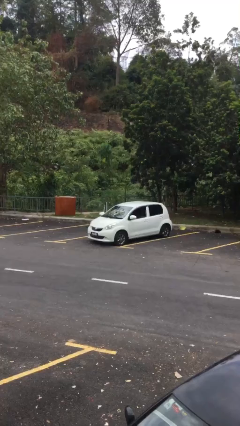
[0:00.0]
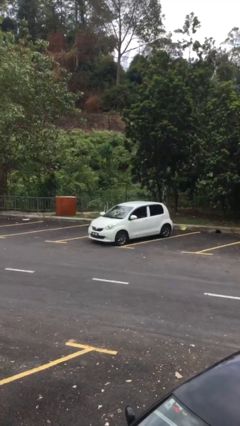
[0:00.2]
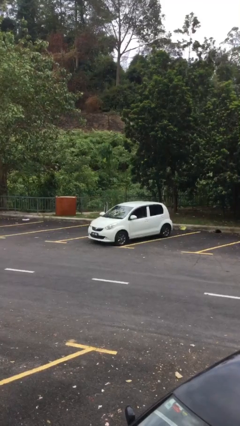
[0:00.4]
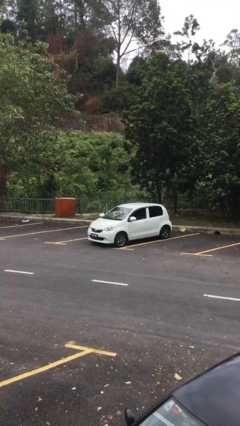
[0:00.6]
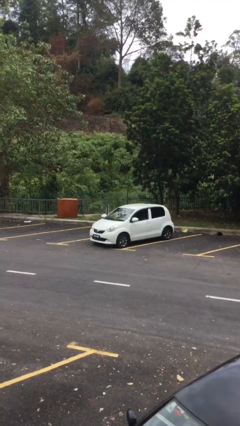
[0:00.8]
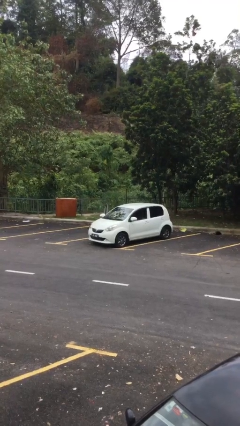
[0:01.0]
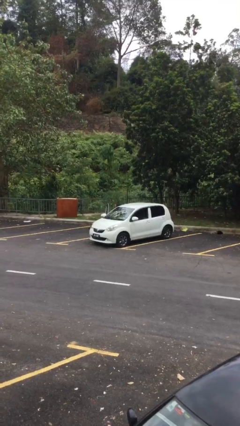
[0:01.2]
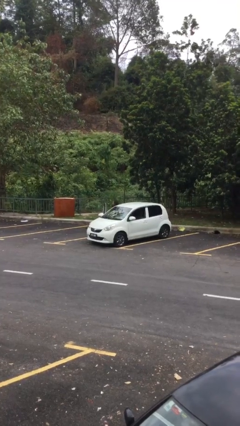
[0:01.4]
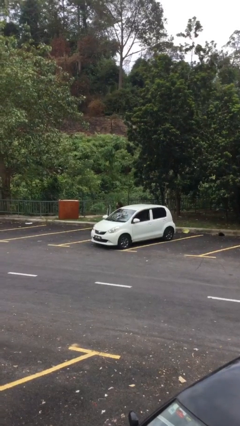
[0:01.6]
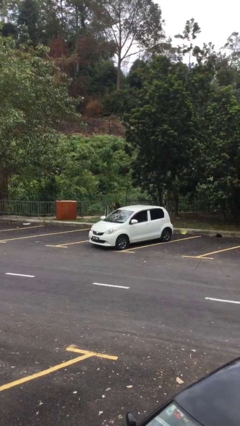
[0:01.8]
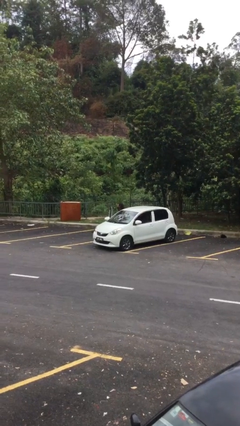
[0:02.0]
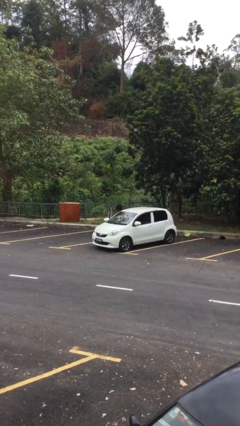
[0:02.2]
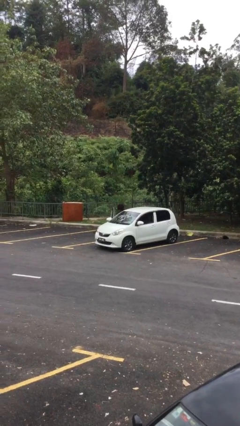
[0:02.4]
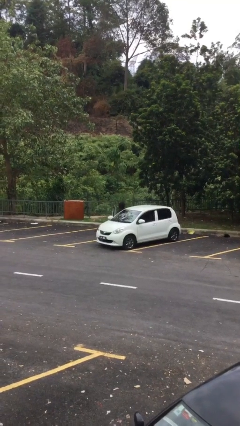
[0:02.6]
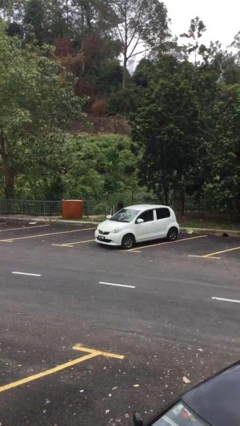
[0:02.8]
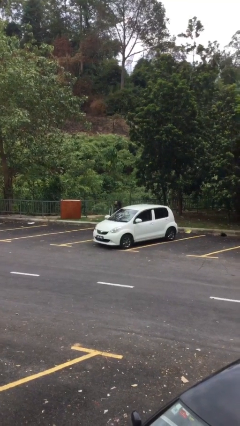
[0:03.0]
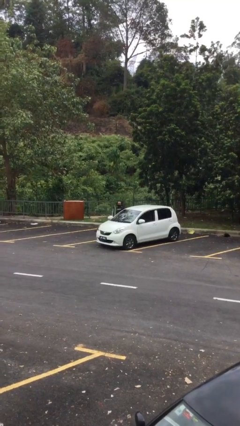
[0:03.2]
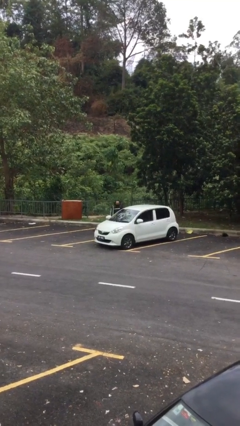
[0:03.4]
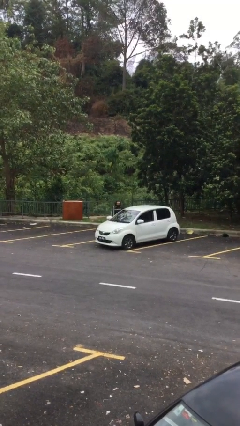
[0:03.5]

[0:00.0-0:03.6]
person exits car

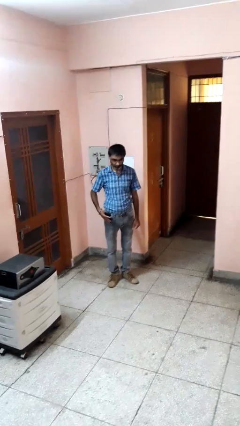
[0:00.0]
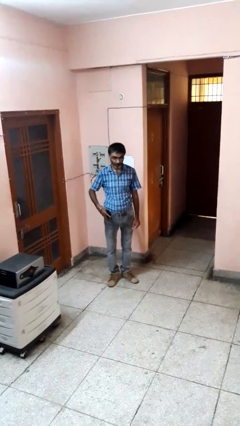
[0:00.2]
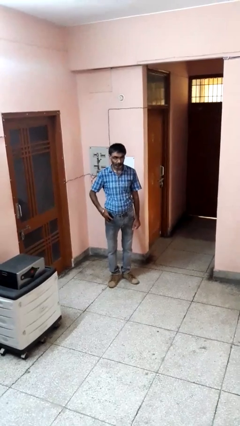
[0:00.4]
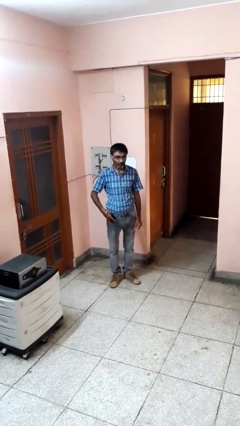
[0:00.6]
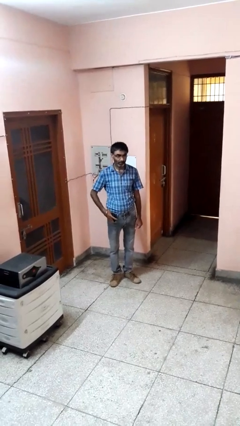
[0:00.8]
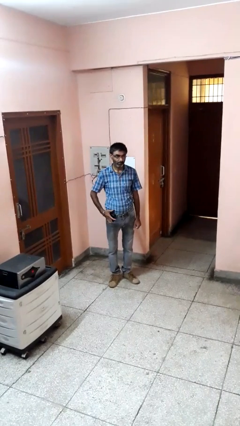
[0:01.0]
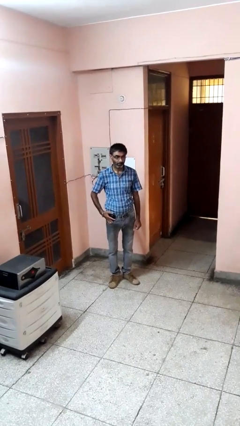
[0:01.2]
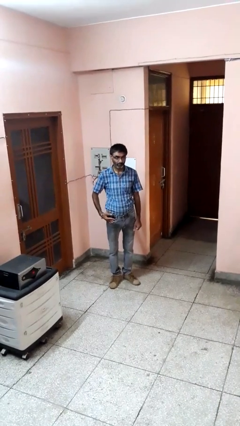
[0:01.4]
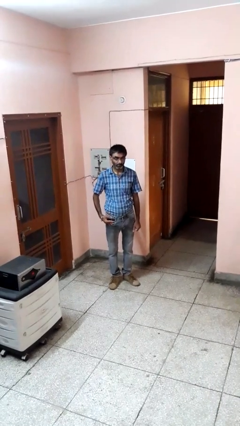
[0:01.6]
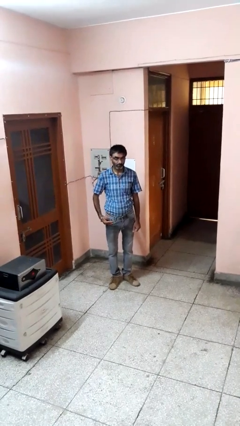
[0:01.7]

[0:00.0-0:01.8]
person puts phone into pocket

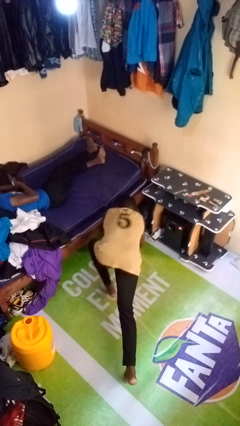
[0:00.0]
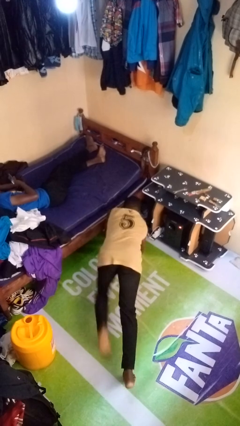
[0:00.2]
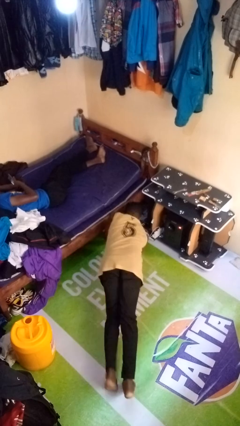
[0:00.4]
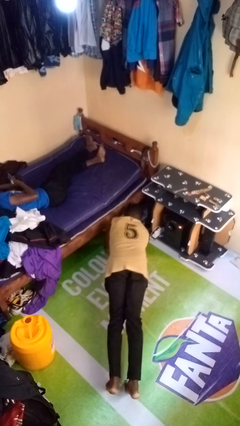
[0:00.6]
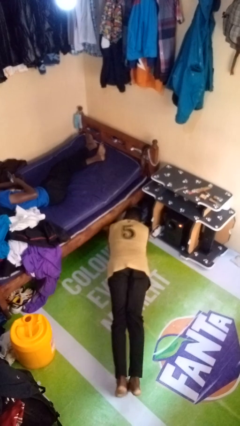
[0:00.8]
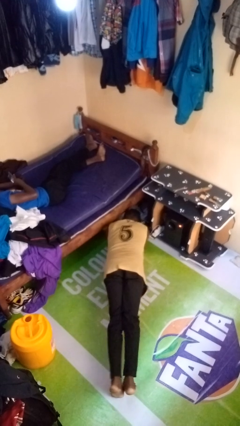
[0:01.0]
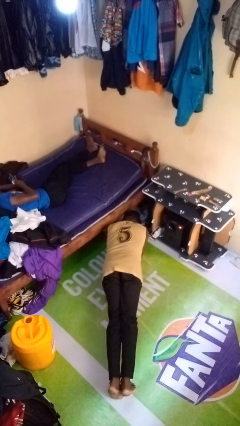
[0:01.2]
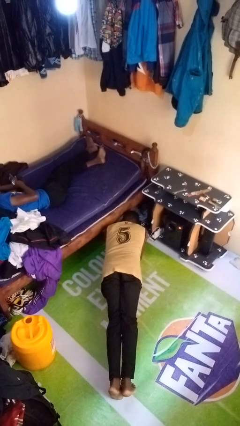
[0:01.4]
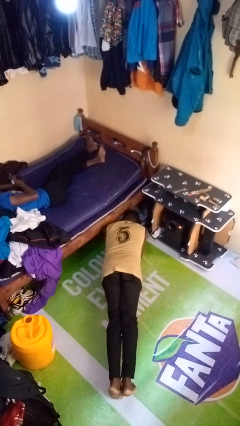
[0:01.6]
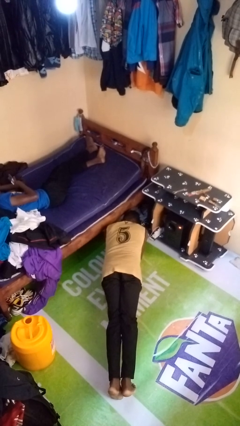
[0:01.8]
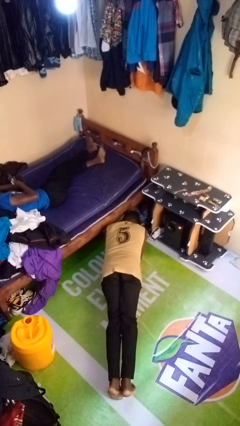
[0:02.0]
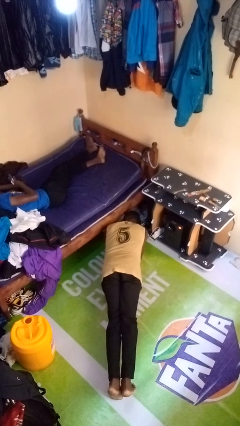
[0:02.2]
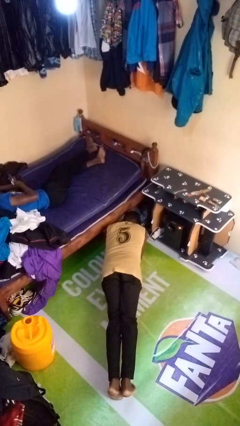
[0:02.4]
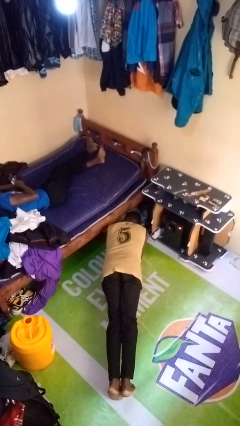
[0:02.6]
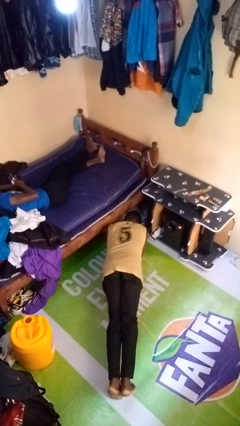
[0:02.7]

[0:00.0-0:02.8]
person exercises with plank

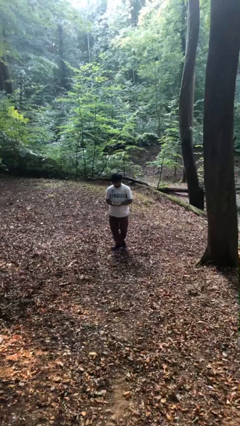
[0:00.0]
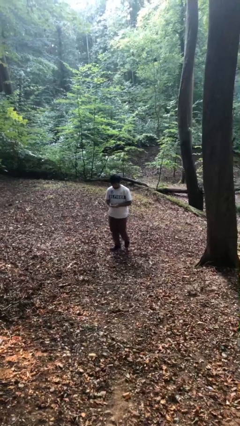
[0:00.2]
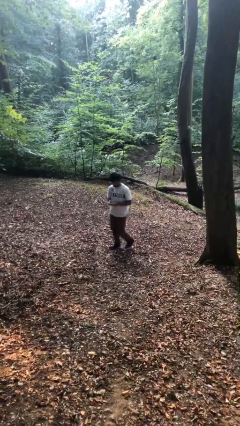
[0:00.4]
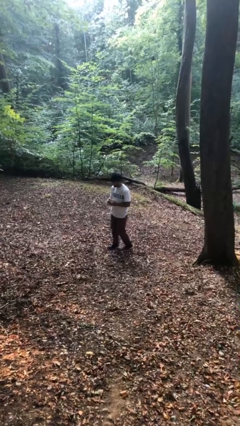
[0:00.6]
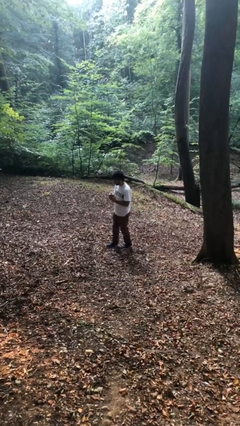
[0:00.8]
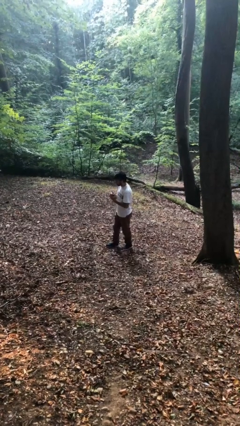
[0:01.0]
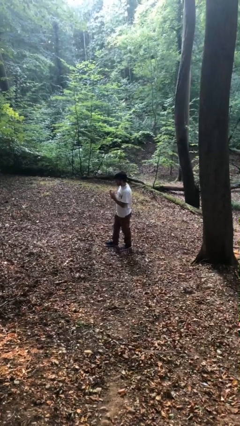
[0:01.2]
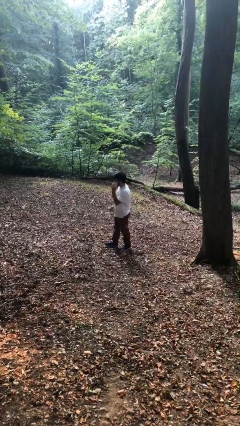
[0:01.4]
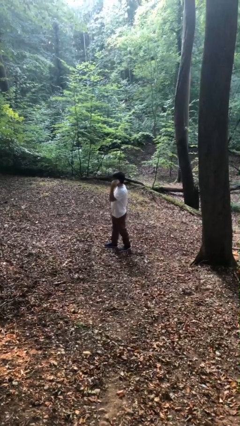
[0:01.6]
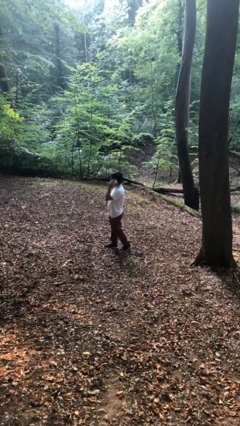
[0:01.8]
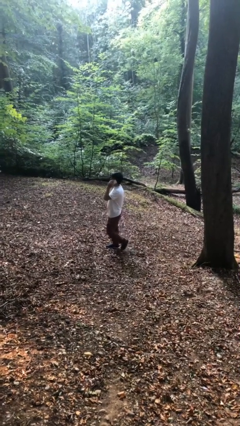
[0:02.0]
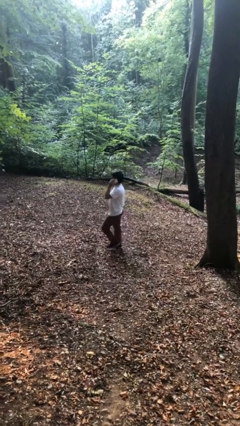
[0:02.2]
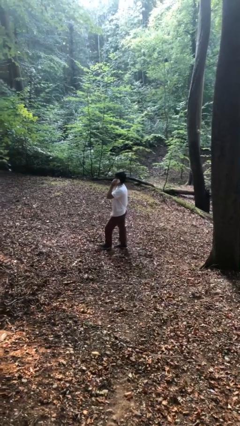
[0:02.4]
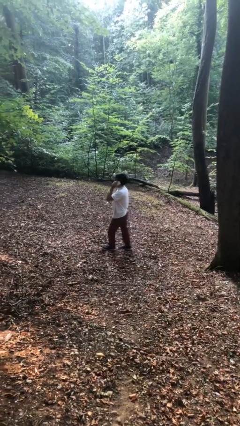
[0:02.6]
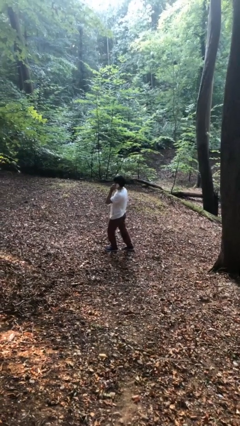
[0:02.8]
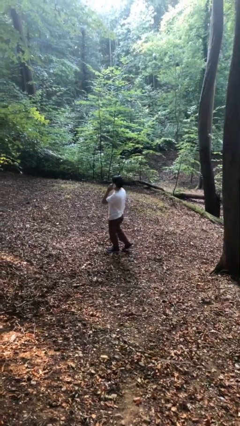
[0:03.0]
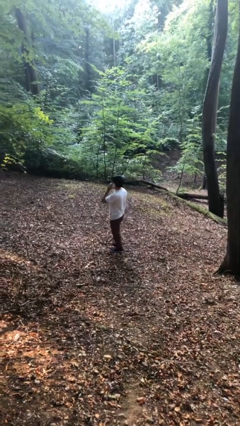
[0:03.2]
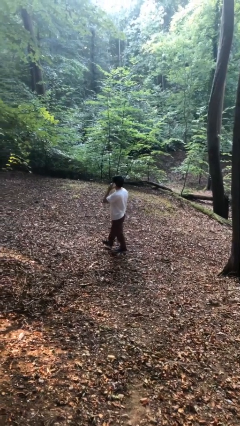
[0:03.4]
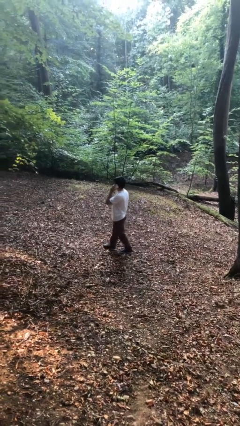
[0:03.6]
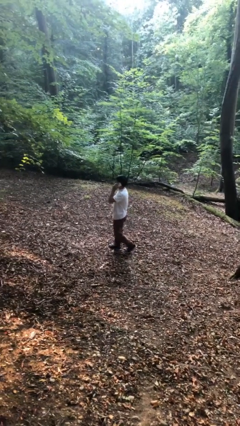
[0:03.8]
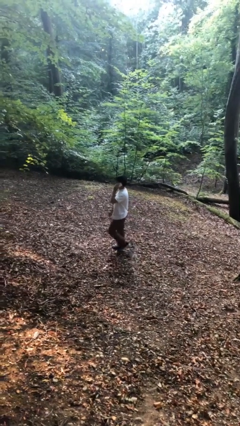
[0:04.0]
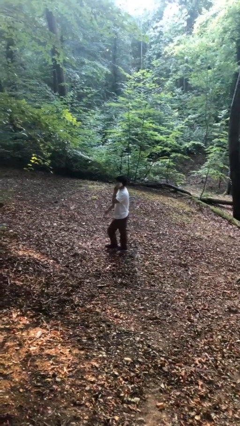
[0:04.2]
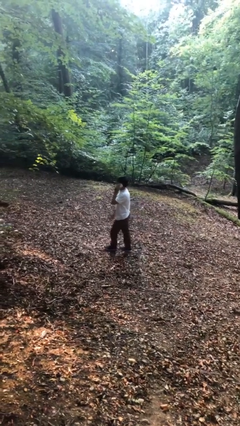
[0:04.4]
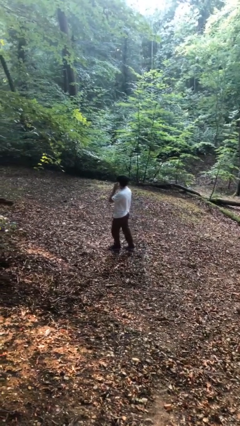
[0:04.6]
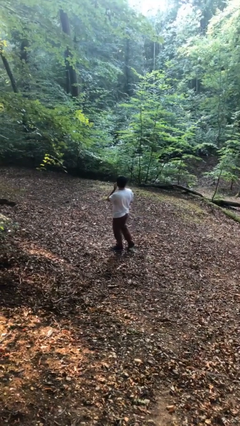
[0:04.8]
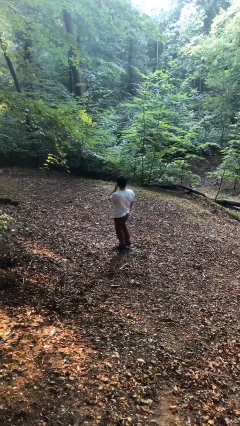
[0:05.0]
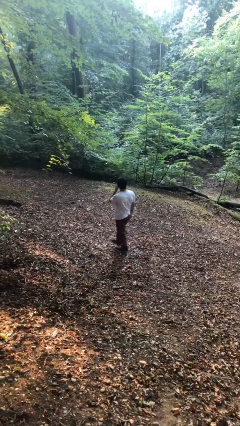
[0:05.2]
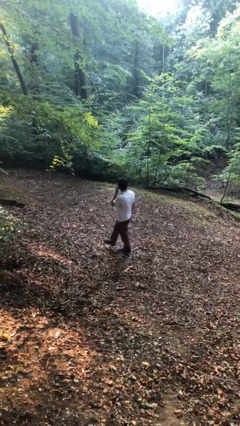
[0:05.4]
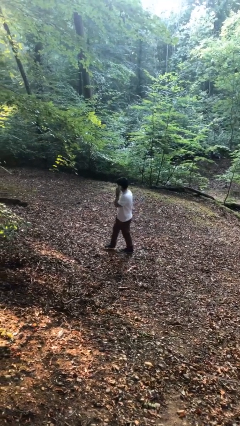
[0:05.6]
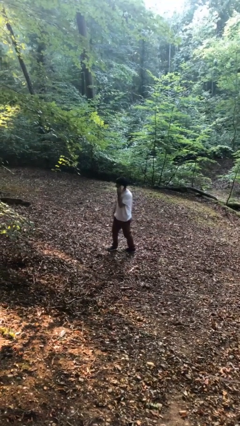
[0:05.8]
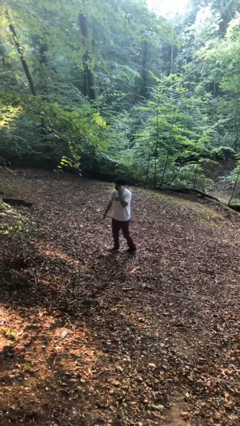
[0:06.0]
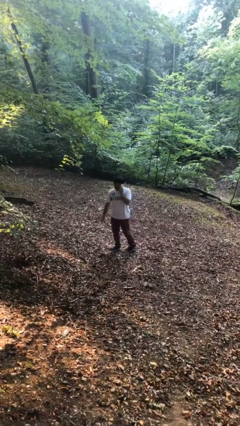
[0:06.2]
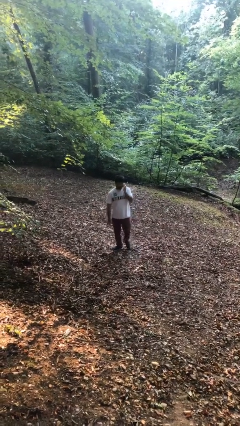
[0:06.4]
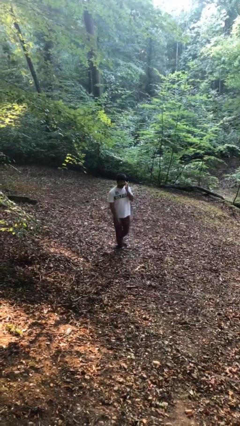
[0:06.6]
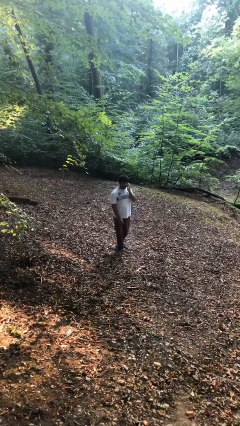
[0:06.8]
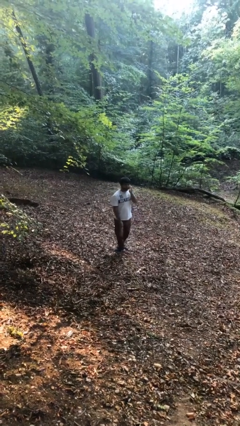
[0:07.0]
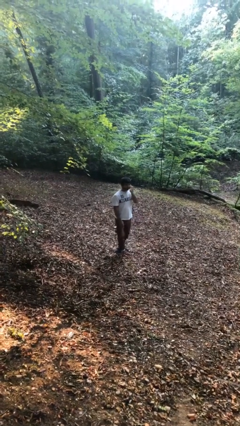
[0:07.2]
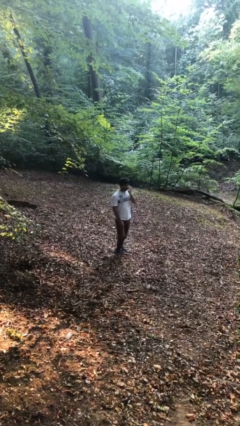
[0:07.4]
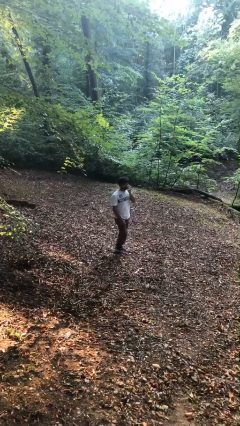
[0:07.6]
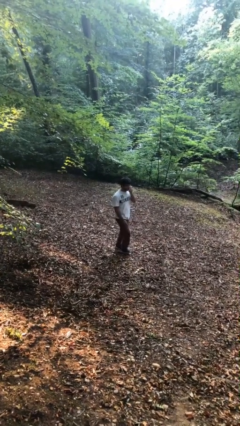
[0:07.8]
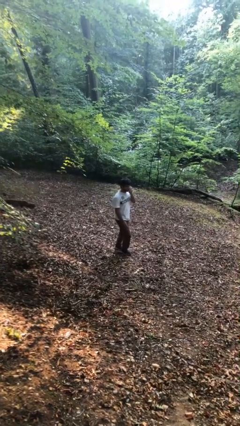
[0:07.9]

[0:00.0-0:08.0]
person talks on phone

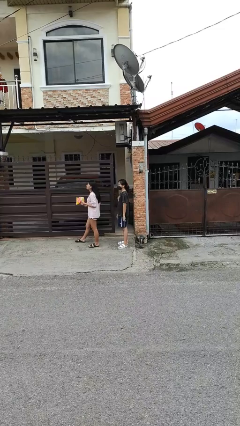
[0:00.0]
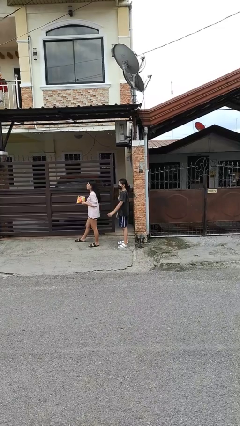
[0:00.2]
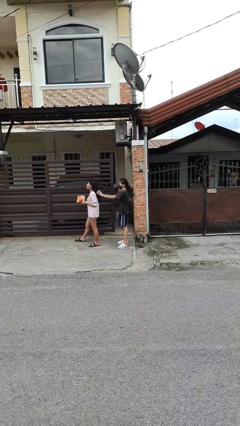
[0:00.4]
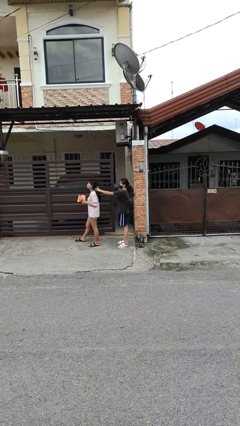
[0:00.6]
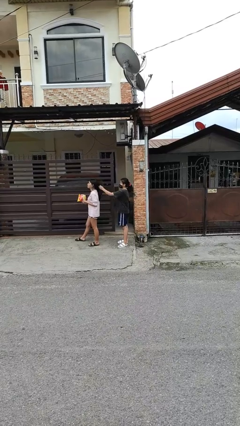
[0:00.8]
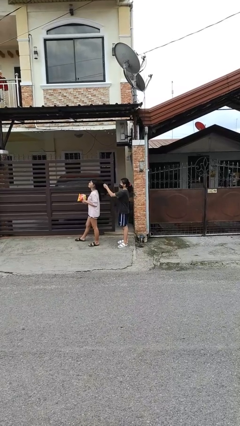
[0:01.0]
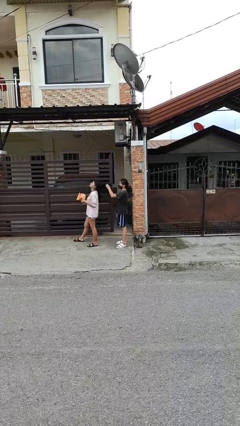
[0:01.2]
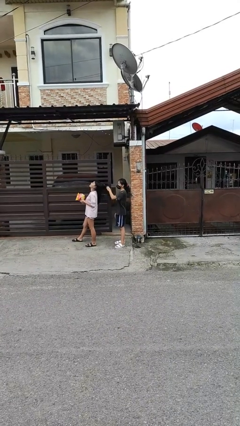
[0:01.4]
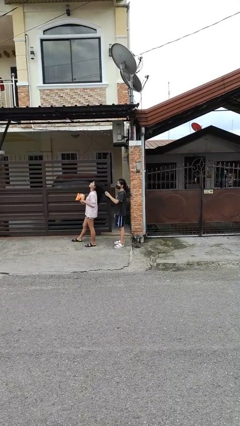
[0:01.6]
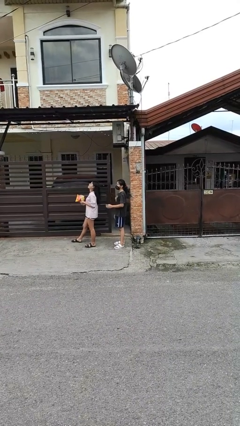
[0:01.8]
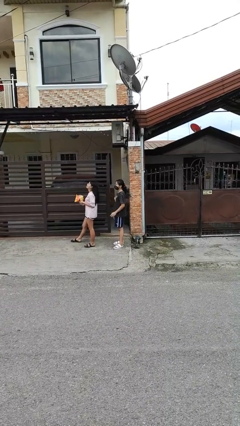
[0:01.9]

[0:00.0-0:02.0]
person grabs person by hair
